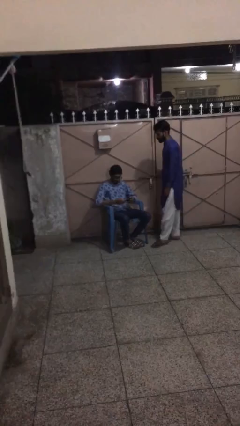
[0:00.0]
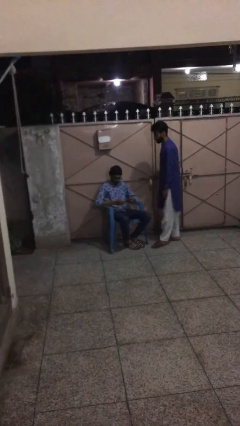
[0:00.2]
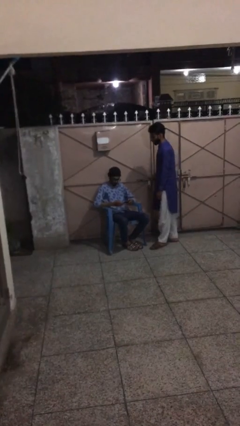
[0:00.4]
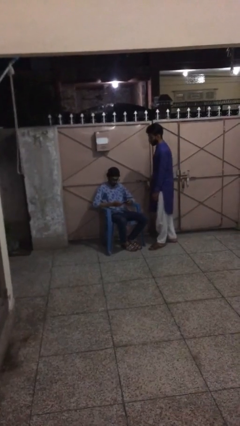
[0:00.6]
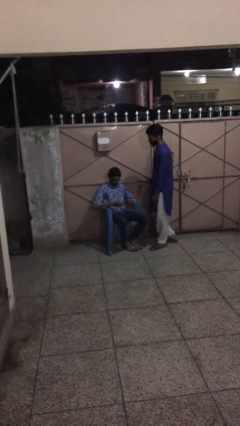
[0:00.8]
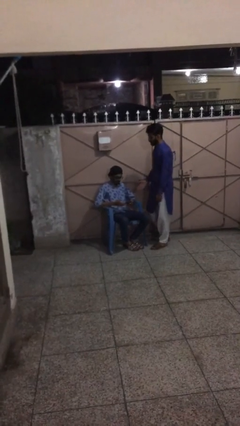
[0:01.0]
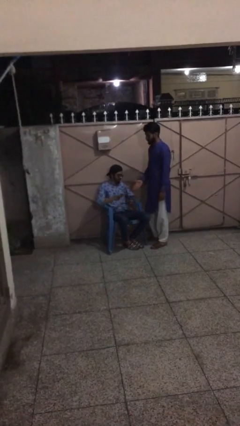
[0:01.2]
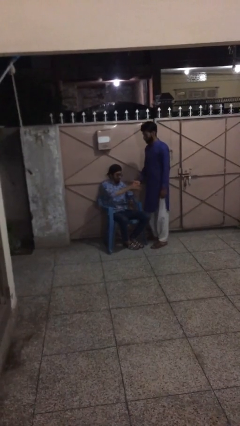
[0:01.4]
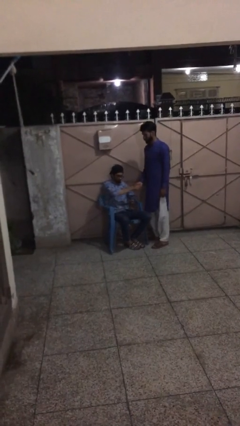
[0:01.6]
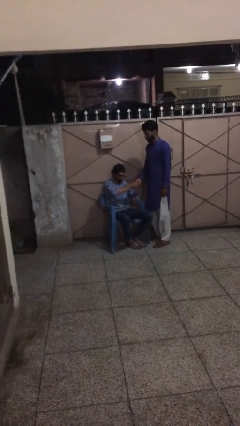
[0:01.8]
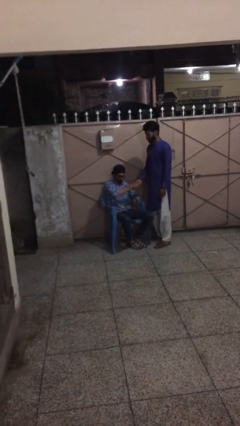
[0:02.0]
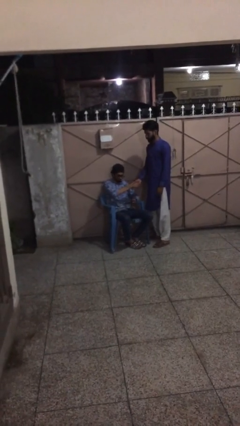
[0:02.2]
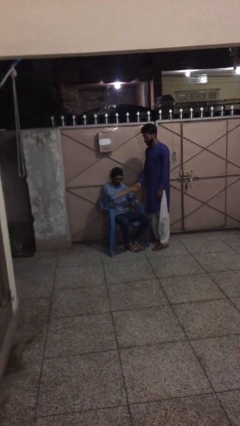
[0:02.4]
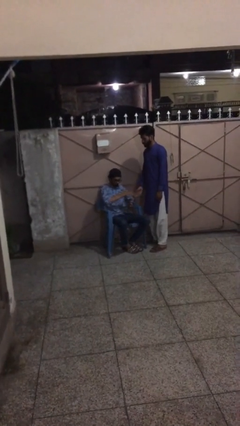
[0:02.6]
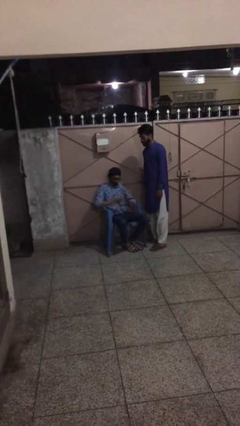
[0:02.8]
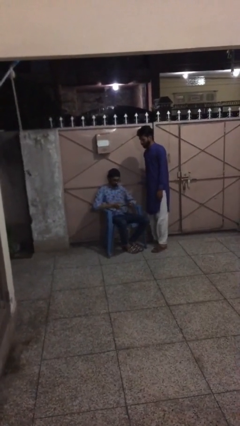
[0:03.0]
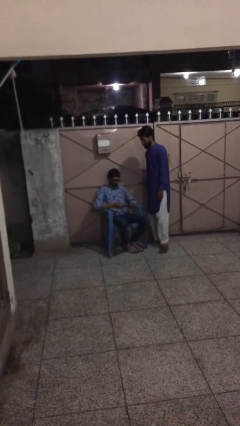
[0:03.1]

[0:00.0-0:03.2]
person shakes hand

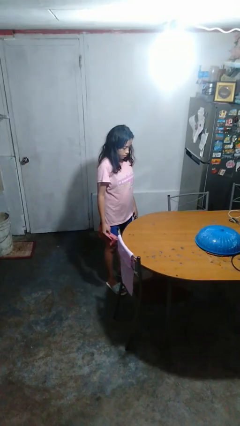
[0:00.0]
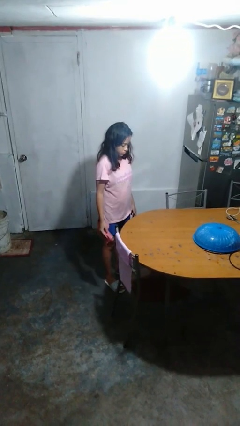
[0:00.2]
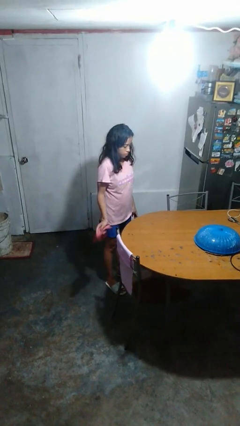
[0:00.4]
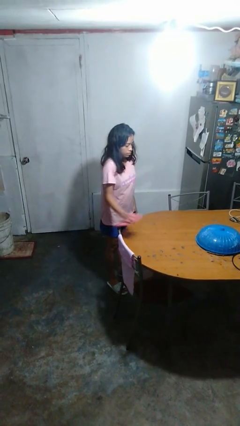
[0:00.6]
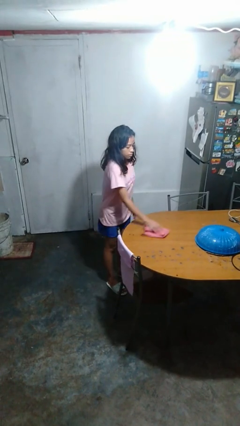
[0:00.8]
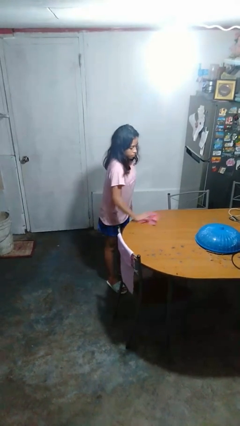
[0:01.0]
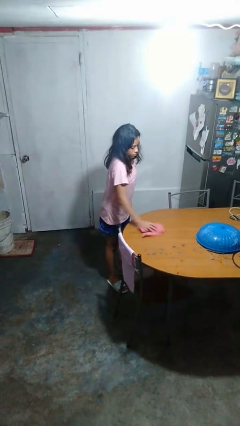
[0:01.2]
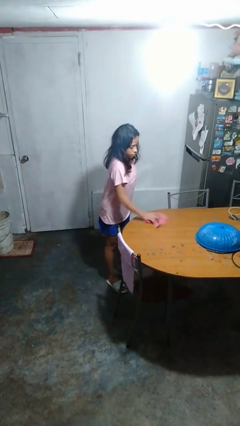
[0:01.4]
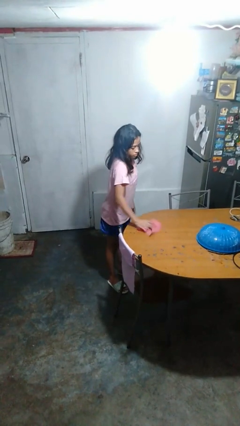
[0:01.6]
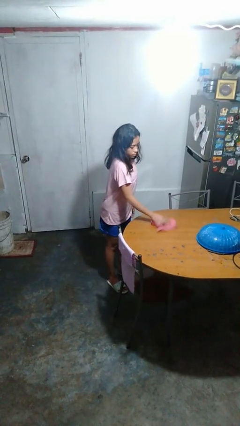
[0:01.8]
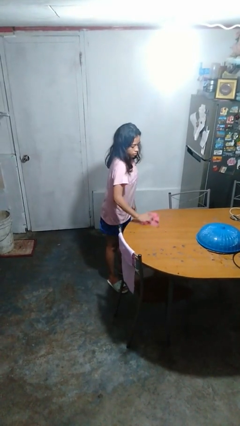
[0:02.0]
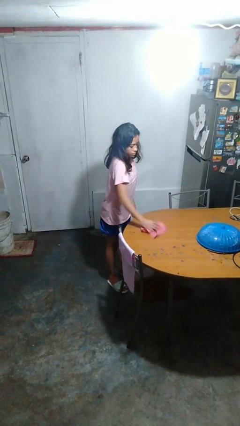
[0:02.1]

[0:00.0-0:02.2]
person cleans table with rag

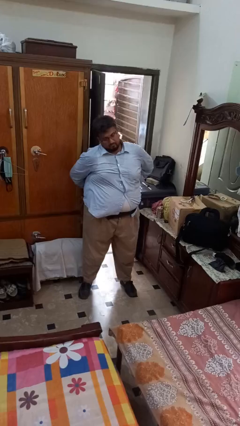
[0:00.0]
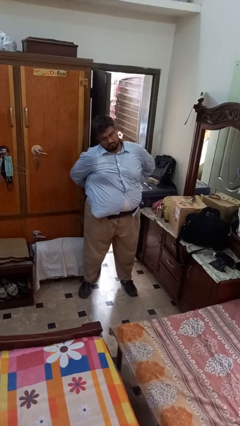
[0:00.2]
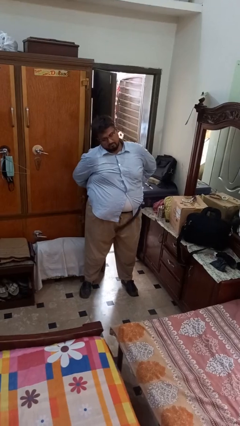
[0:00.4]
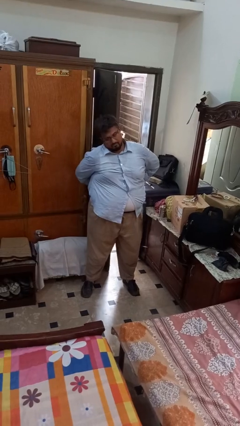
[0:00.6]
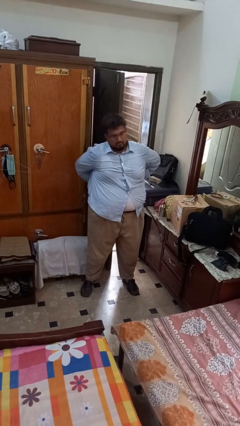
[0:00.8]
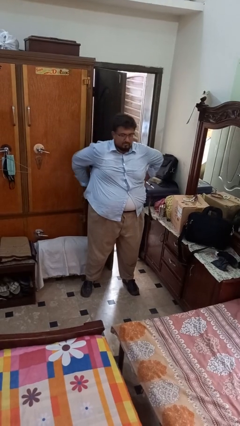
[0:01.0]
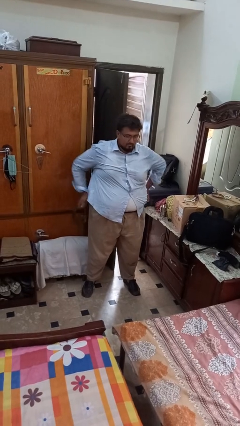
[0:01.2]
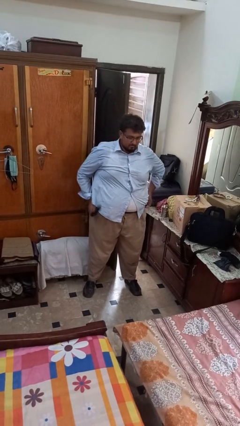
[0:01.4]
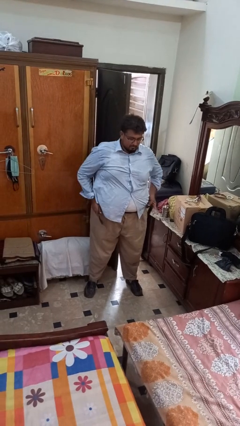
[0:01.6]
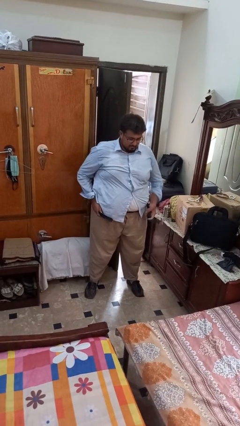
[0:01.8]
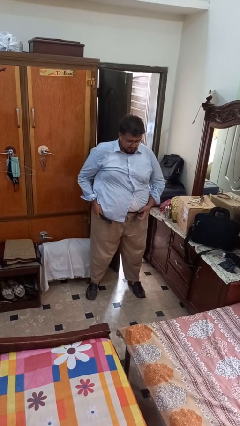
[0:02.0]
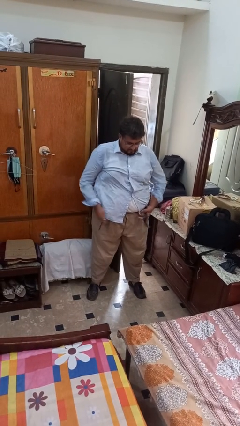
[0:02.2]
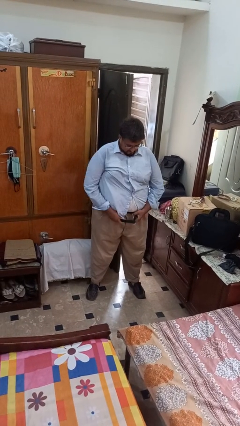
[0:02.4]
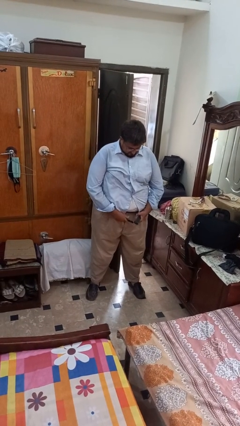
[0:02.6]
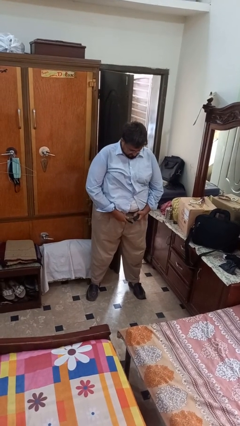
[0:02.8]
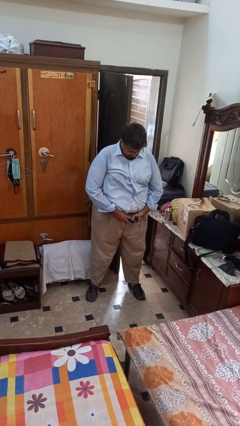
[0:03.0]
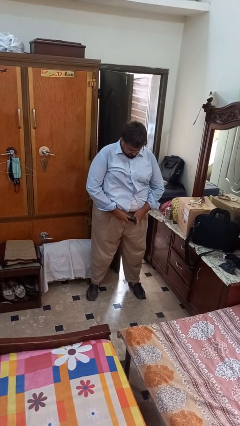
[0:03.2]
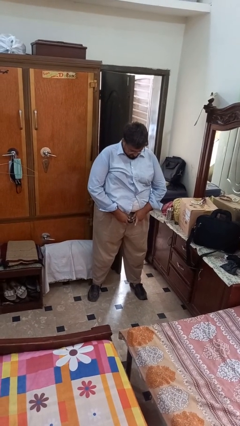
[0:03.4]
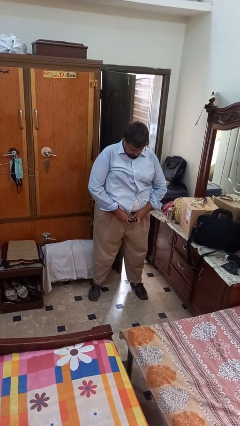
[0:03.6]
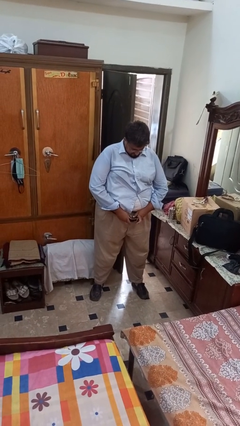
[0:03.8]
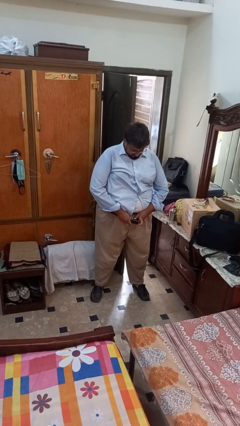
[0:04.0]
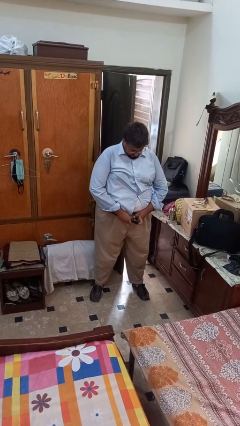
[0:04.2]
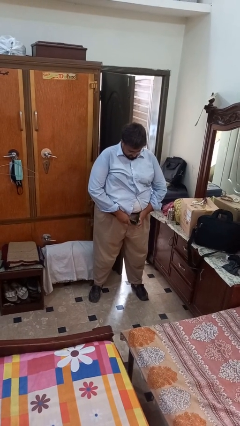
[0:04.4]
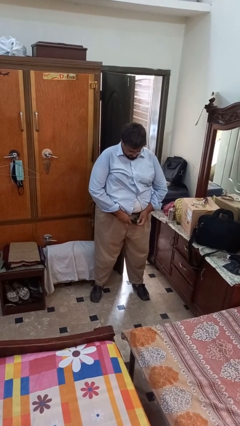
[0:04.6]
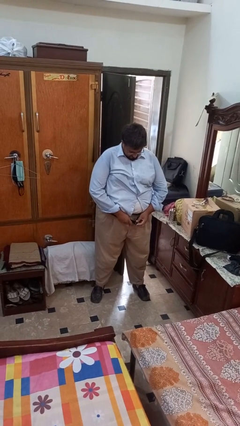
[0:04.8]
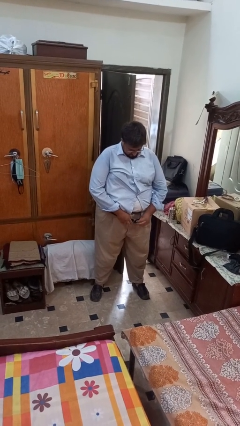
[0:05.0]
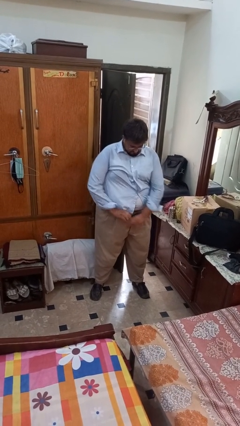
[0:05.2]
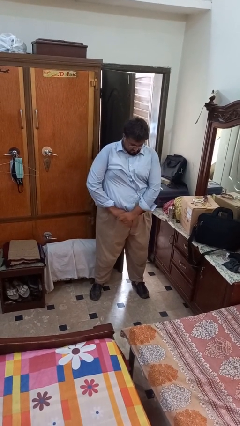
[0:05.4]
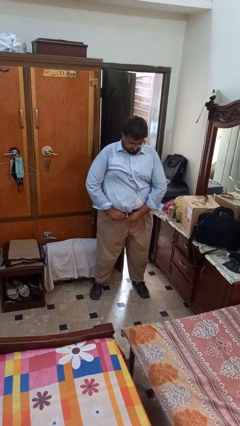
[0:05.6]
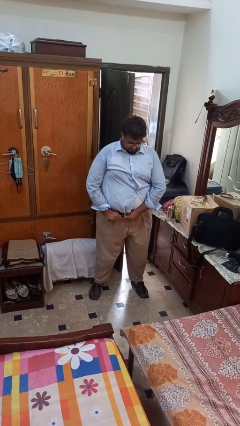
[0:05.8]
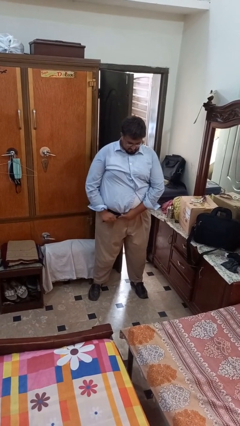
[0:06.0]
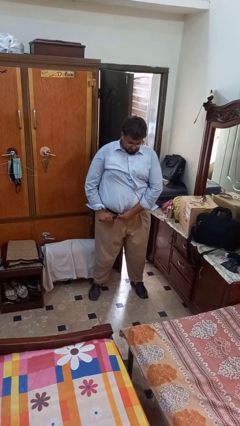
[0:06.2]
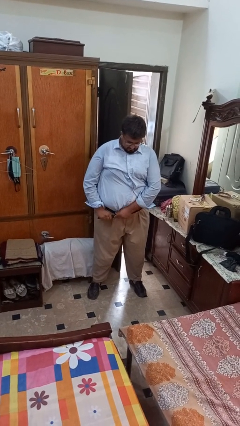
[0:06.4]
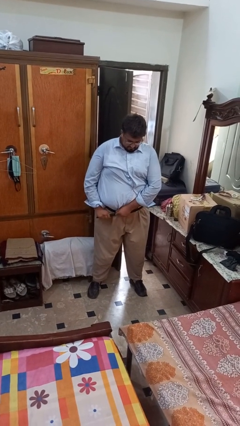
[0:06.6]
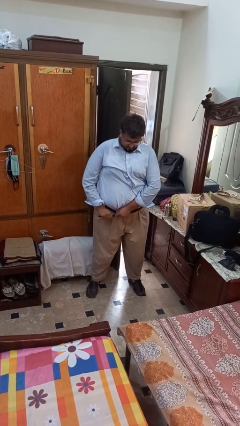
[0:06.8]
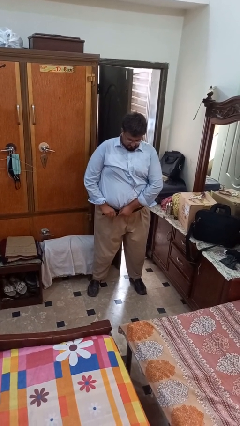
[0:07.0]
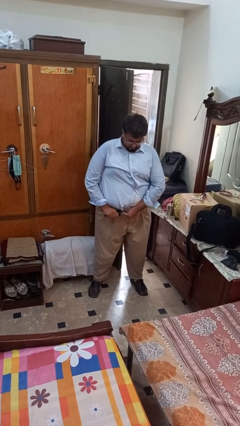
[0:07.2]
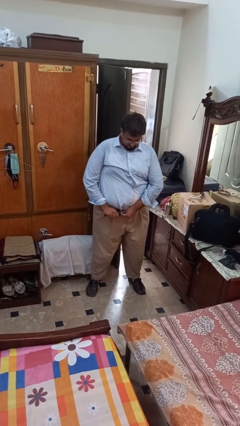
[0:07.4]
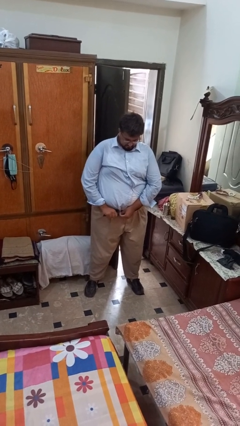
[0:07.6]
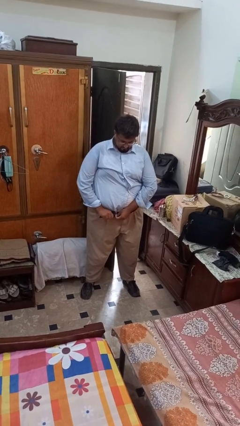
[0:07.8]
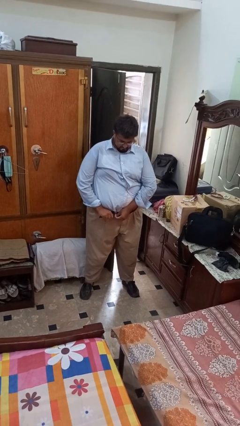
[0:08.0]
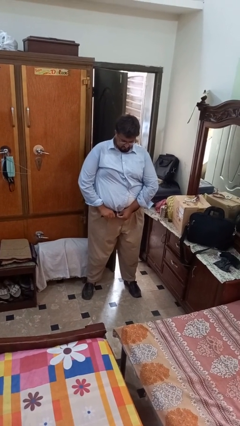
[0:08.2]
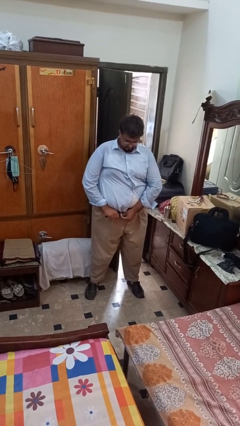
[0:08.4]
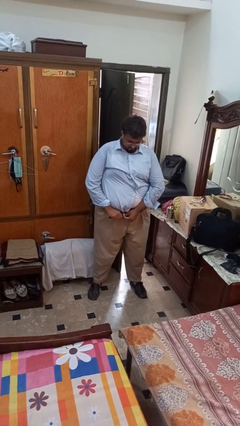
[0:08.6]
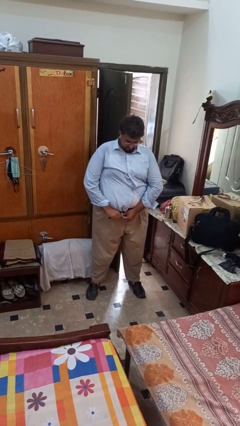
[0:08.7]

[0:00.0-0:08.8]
person puts on belt

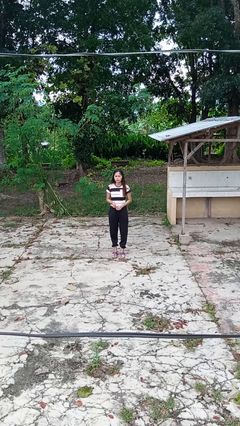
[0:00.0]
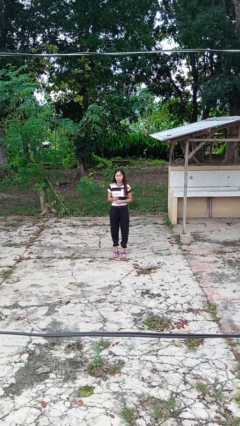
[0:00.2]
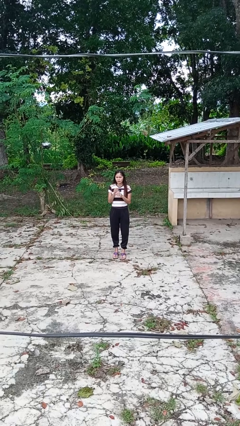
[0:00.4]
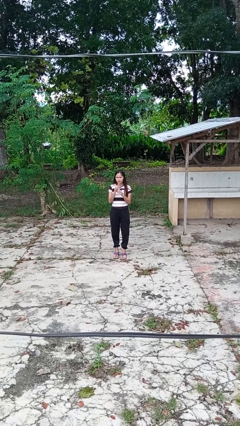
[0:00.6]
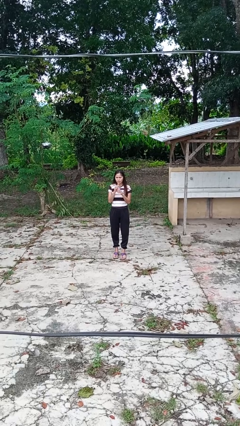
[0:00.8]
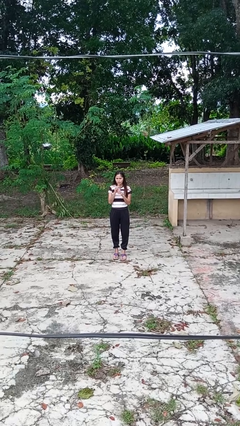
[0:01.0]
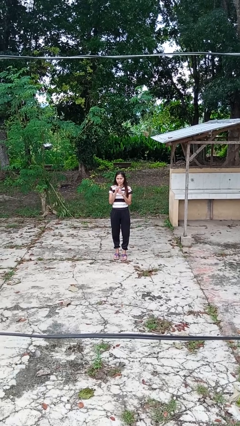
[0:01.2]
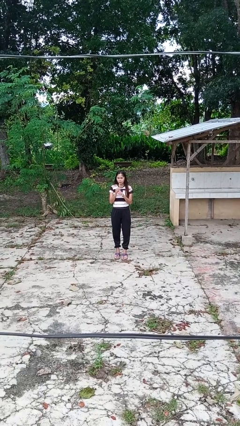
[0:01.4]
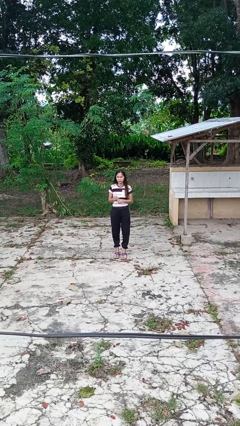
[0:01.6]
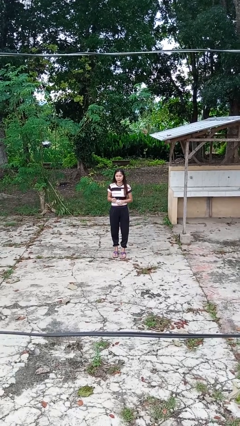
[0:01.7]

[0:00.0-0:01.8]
person drinks from straw

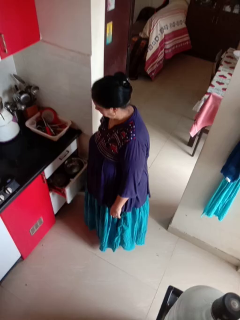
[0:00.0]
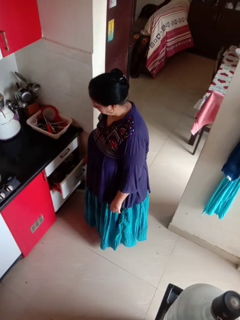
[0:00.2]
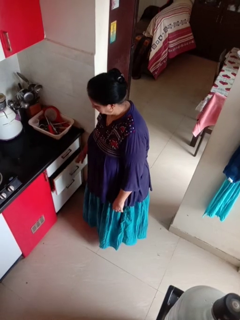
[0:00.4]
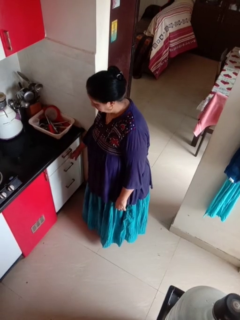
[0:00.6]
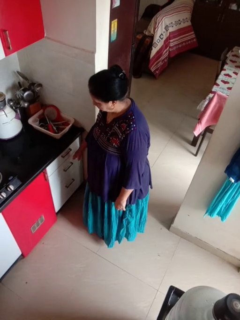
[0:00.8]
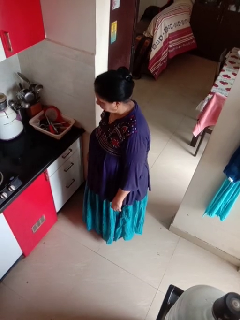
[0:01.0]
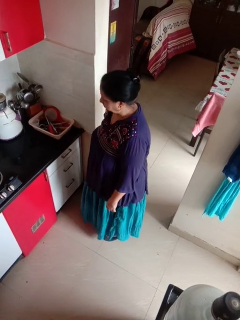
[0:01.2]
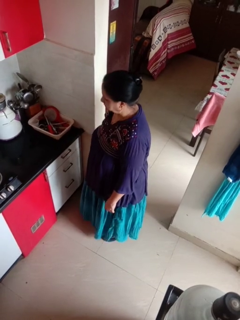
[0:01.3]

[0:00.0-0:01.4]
person closes kitchen drawer
